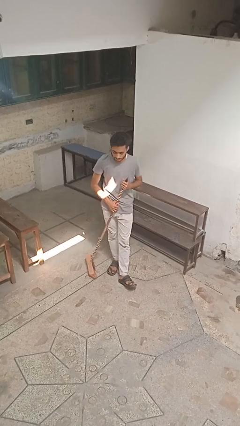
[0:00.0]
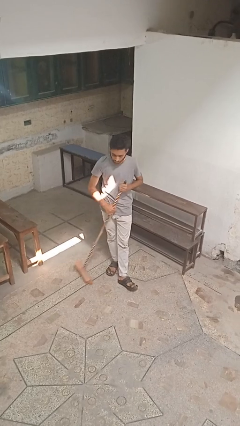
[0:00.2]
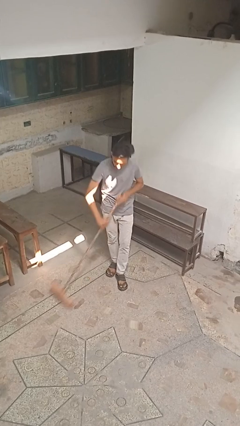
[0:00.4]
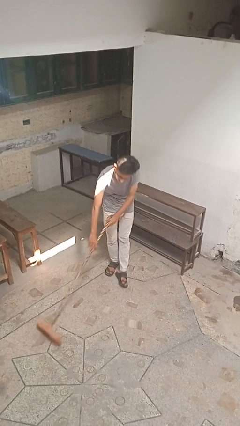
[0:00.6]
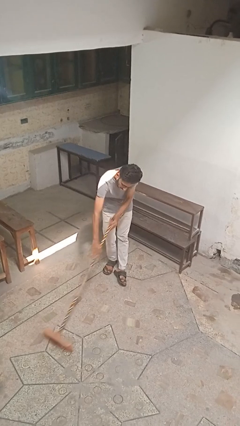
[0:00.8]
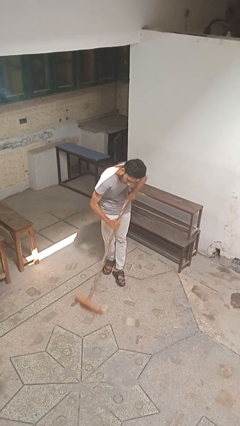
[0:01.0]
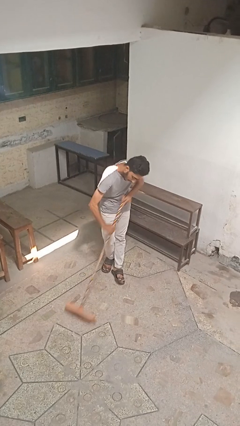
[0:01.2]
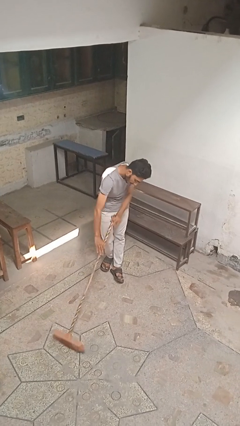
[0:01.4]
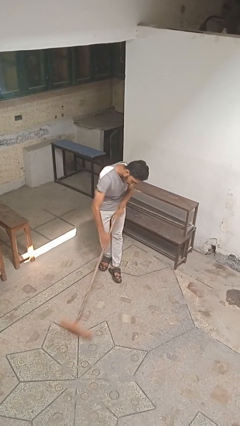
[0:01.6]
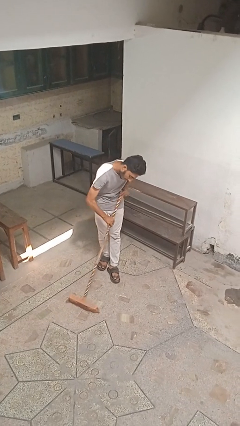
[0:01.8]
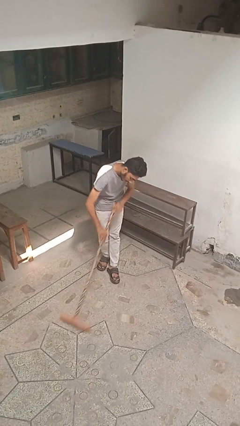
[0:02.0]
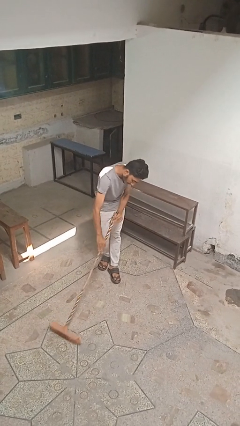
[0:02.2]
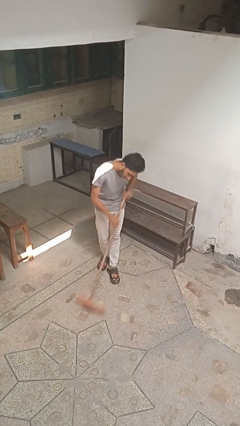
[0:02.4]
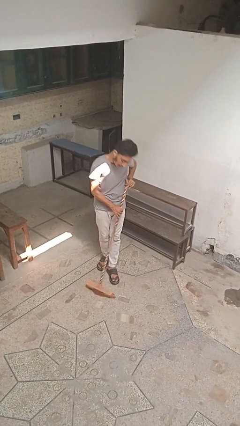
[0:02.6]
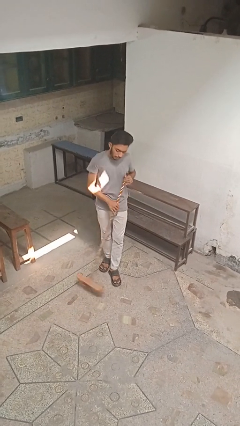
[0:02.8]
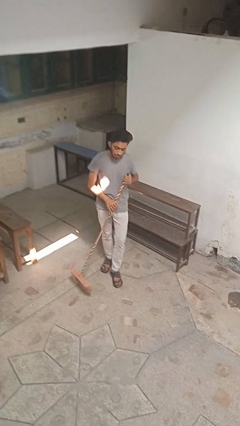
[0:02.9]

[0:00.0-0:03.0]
person sweeps floor

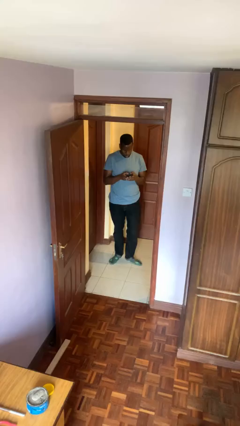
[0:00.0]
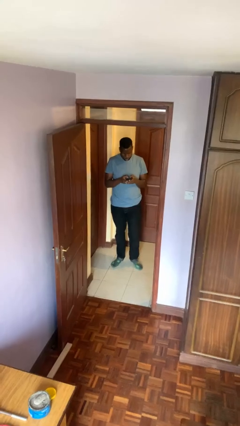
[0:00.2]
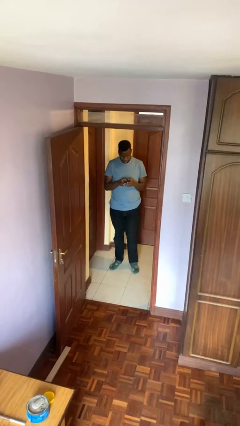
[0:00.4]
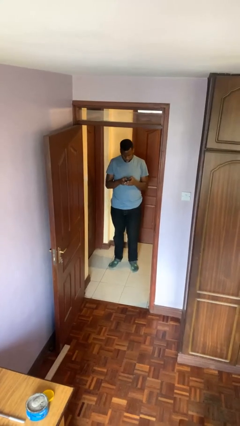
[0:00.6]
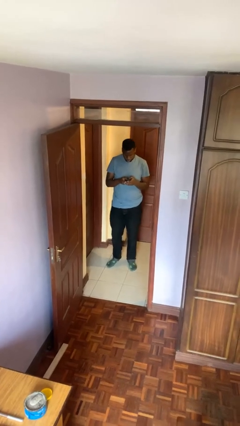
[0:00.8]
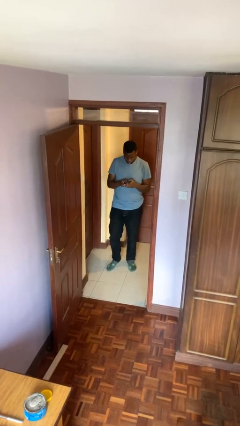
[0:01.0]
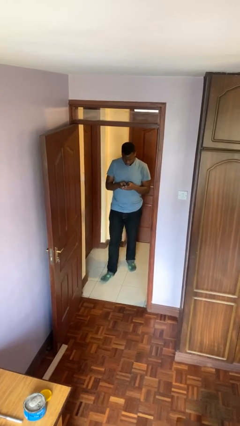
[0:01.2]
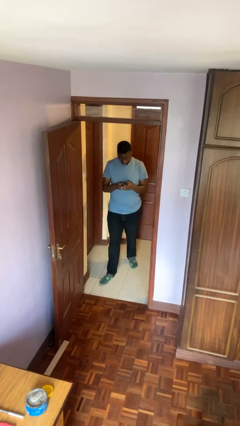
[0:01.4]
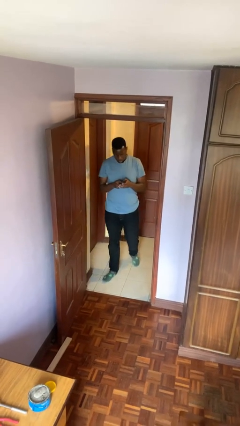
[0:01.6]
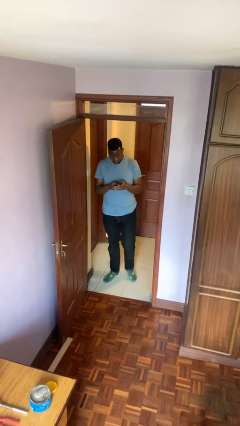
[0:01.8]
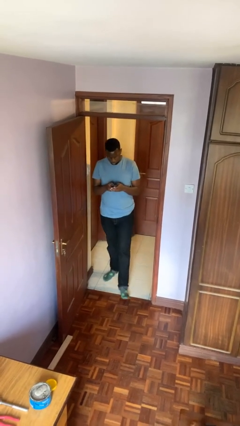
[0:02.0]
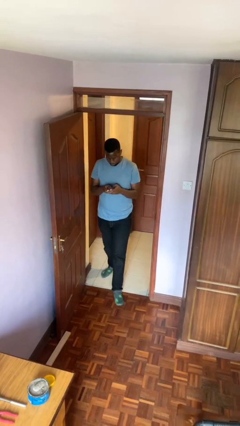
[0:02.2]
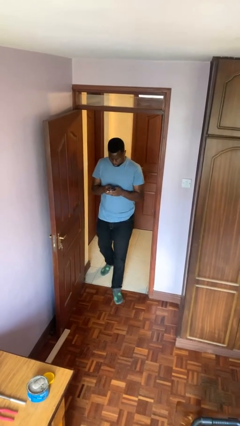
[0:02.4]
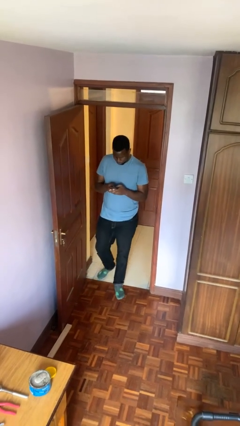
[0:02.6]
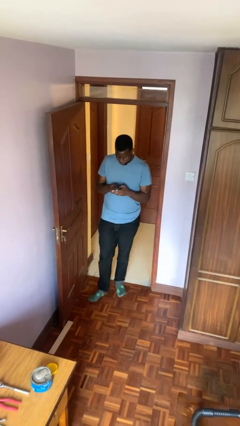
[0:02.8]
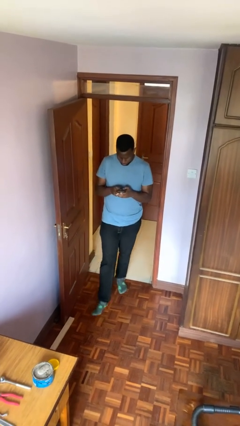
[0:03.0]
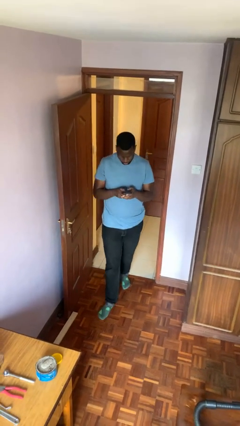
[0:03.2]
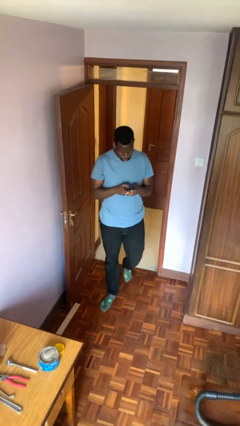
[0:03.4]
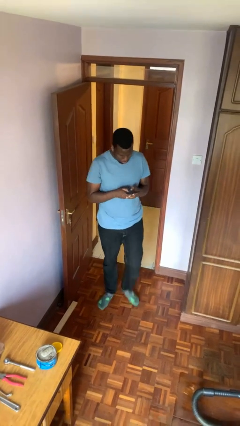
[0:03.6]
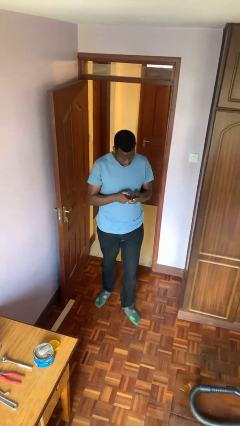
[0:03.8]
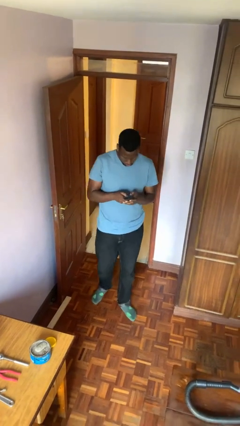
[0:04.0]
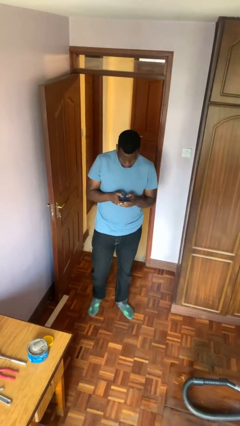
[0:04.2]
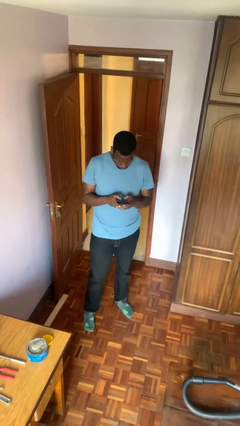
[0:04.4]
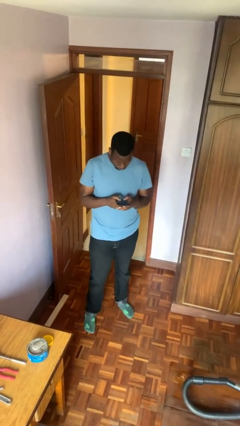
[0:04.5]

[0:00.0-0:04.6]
person enters scene through structure

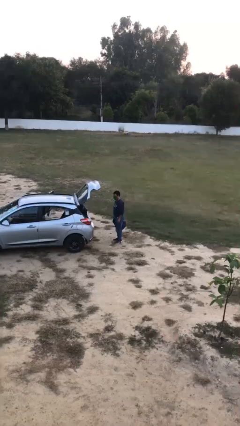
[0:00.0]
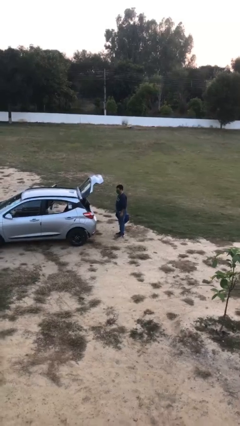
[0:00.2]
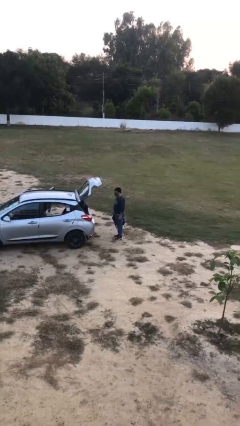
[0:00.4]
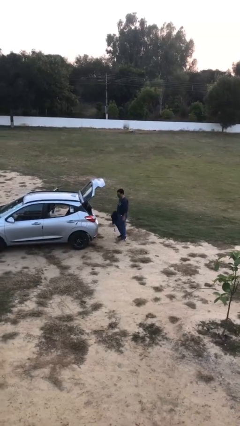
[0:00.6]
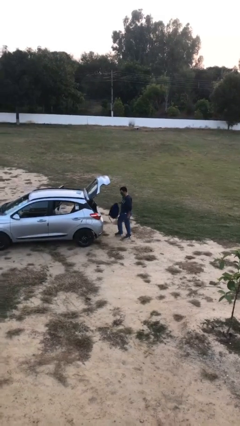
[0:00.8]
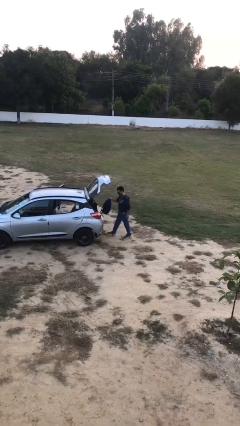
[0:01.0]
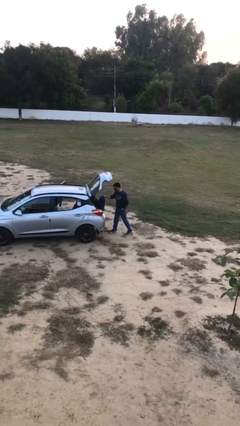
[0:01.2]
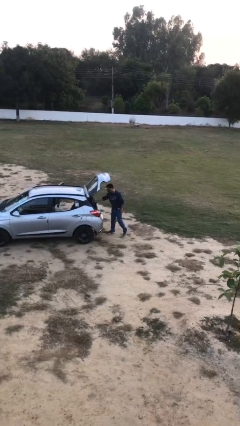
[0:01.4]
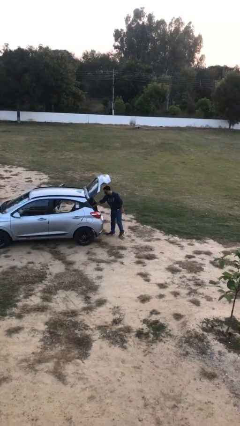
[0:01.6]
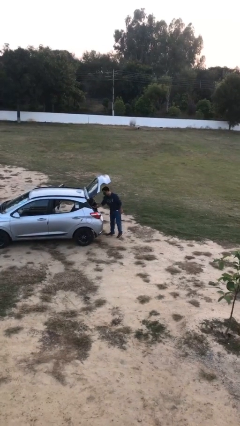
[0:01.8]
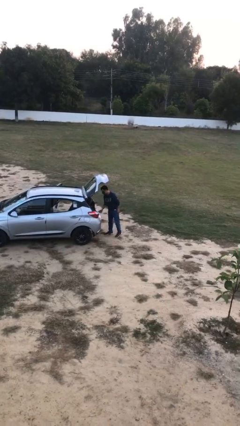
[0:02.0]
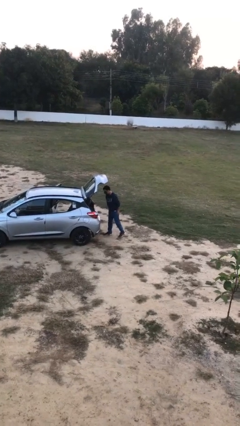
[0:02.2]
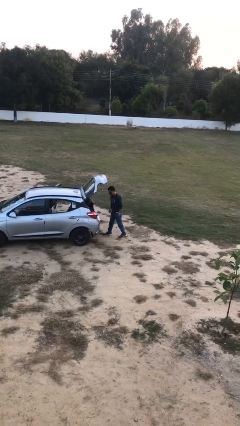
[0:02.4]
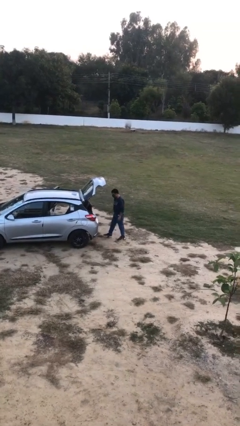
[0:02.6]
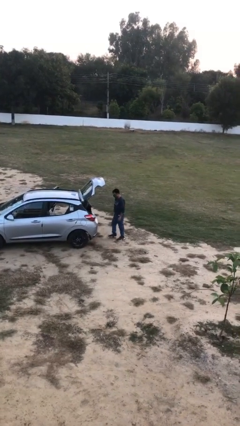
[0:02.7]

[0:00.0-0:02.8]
person loads car

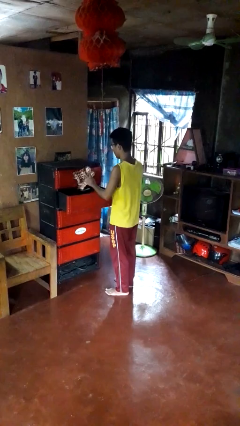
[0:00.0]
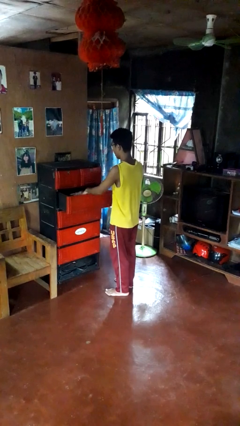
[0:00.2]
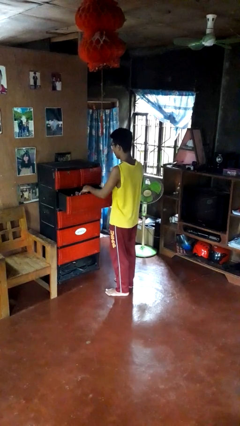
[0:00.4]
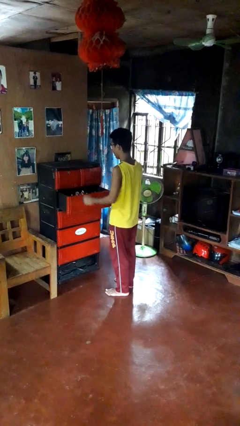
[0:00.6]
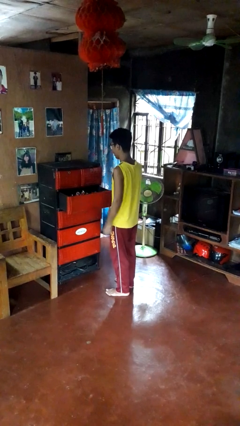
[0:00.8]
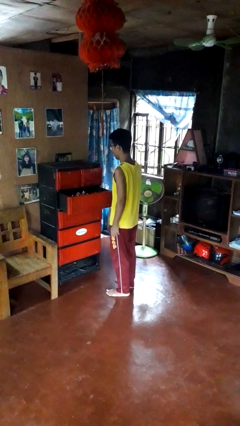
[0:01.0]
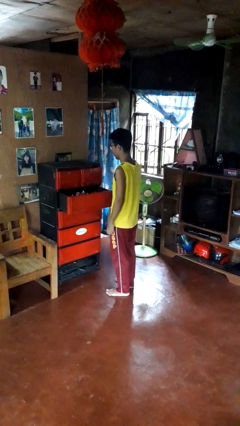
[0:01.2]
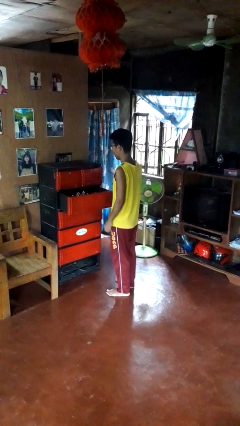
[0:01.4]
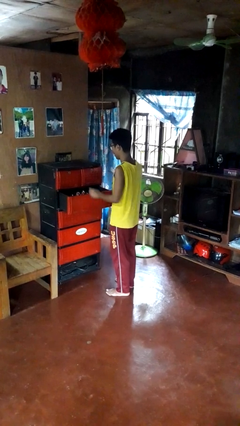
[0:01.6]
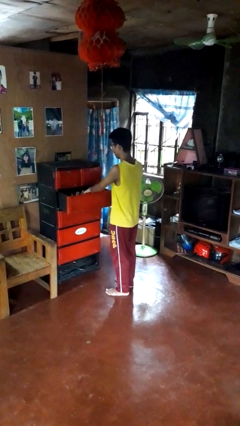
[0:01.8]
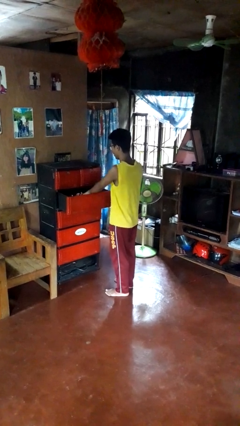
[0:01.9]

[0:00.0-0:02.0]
person puts clothes into dresser

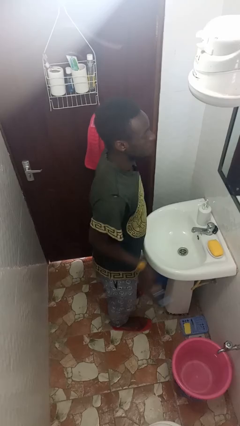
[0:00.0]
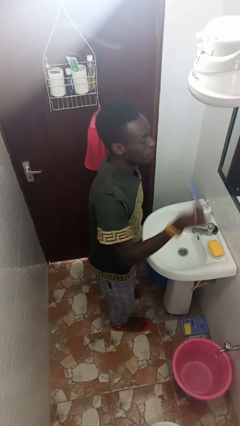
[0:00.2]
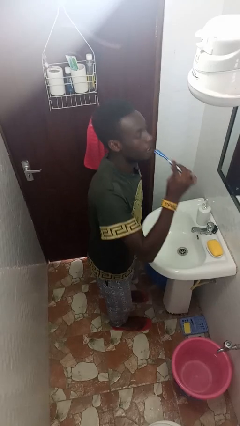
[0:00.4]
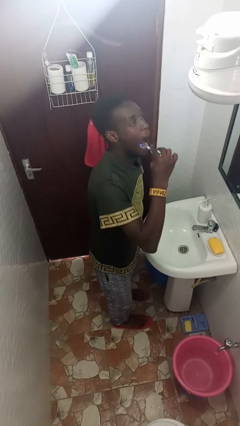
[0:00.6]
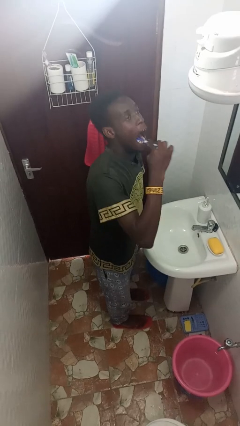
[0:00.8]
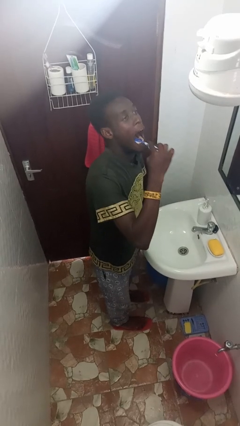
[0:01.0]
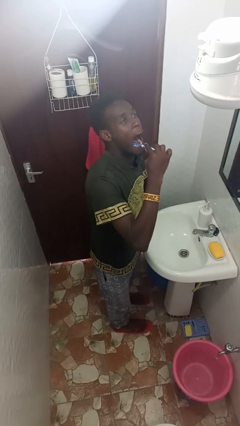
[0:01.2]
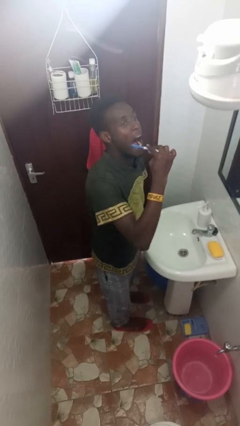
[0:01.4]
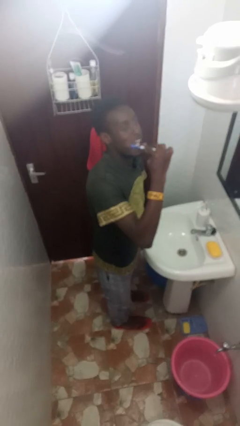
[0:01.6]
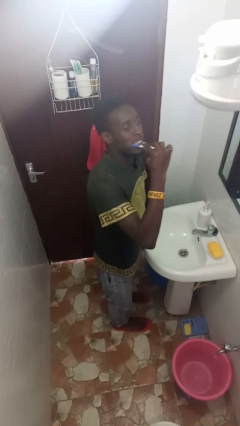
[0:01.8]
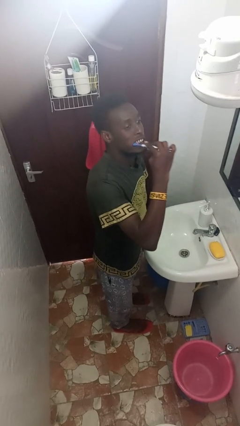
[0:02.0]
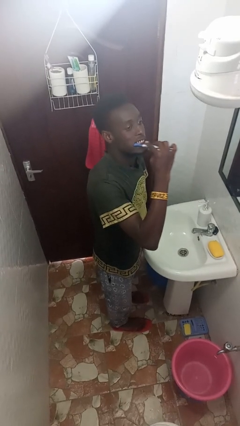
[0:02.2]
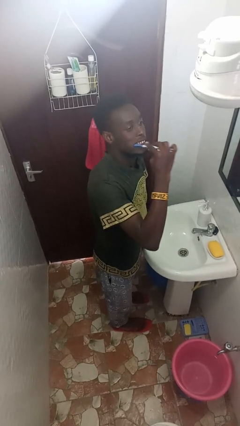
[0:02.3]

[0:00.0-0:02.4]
person brushes teeth

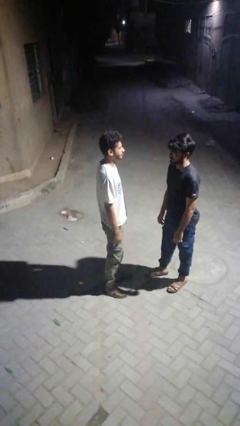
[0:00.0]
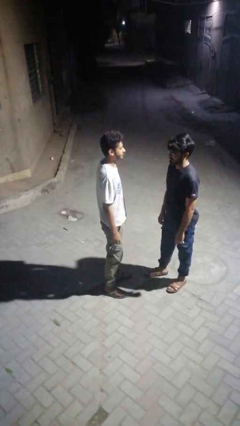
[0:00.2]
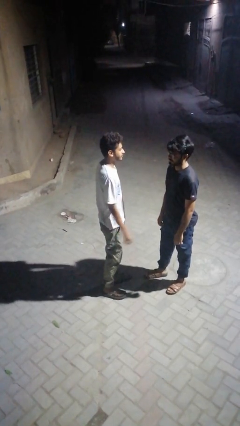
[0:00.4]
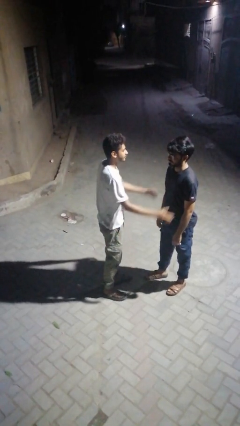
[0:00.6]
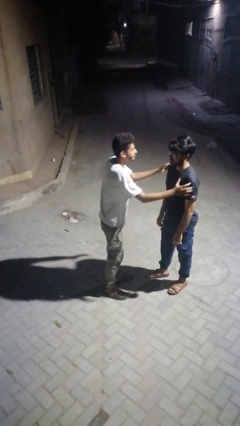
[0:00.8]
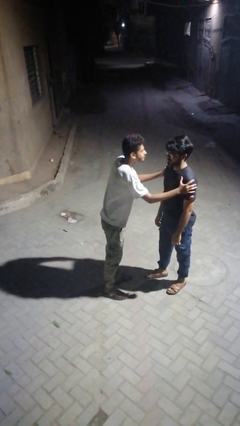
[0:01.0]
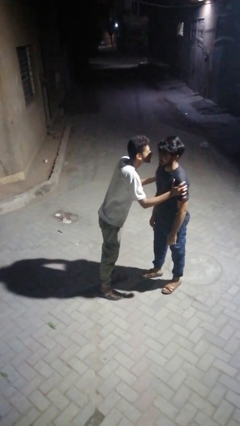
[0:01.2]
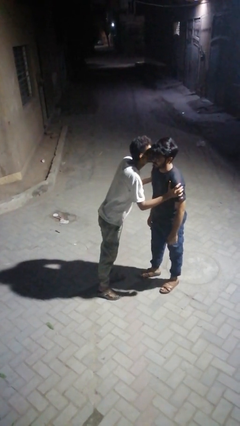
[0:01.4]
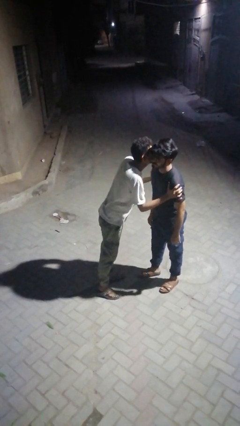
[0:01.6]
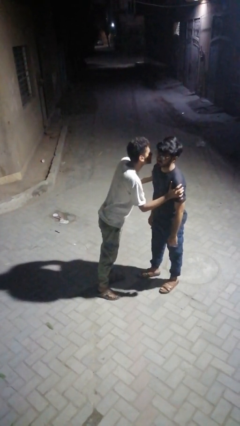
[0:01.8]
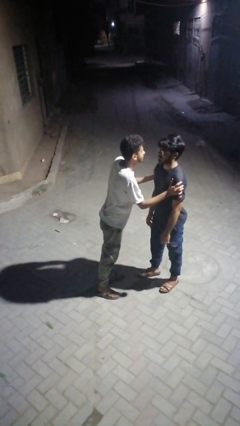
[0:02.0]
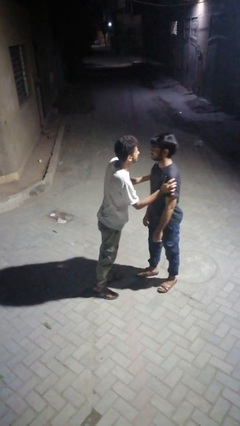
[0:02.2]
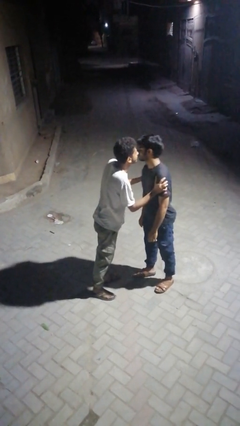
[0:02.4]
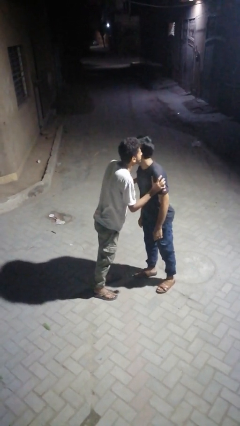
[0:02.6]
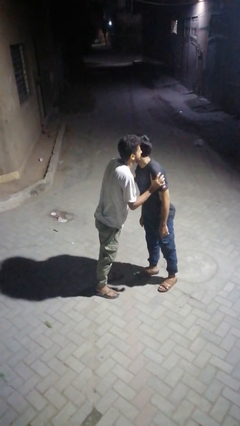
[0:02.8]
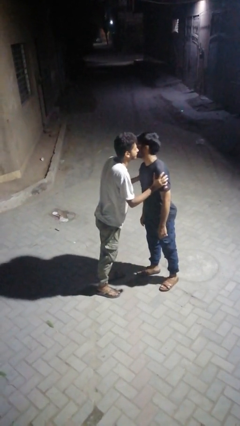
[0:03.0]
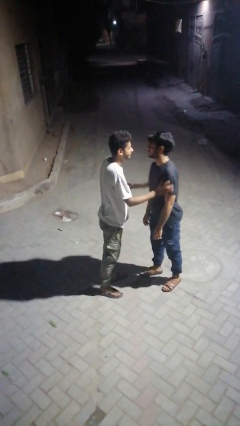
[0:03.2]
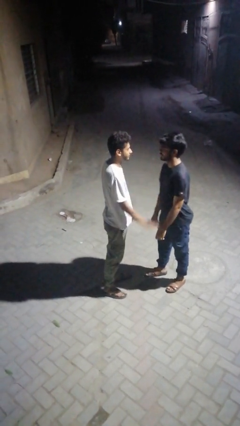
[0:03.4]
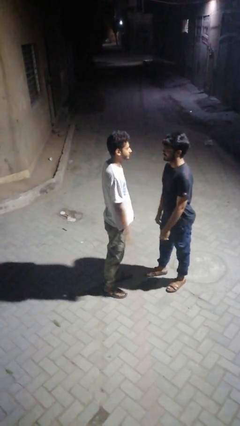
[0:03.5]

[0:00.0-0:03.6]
person kisses cheek of person
